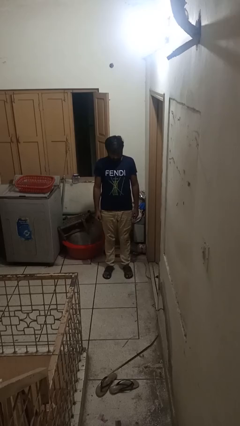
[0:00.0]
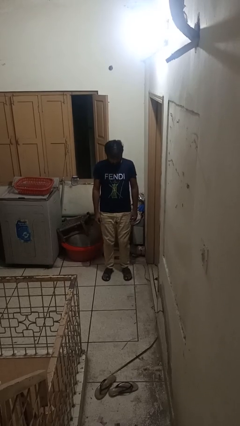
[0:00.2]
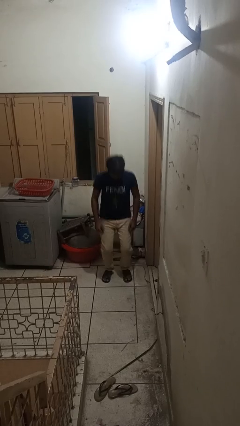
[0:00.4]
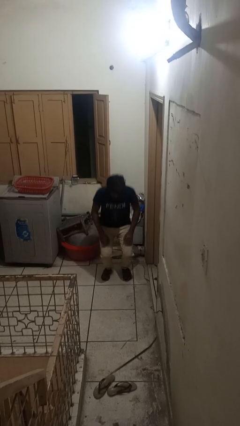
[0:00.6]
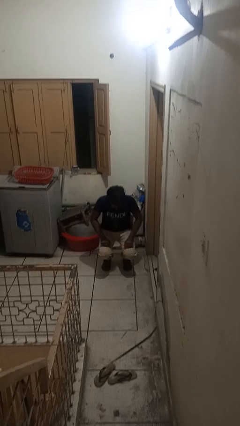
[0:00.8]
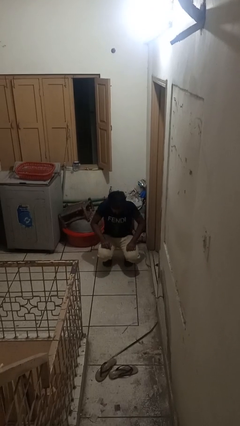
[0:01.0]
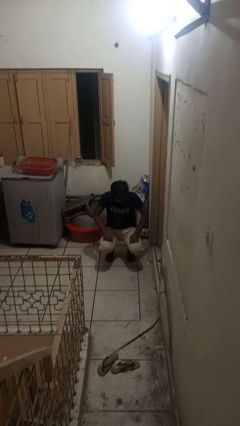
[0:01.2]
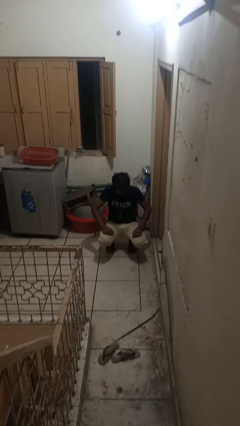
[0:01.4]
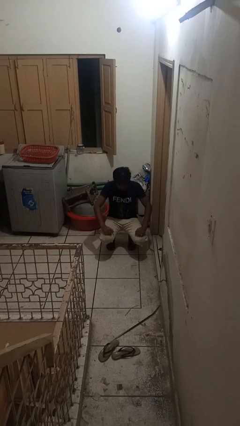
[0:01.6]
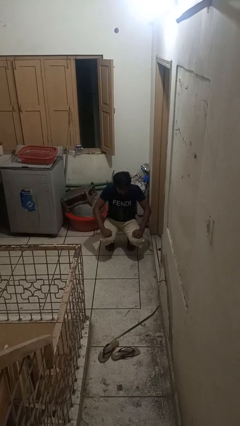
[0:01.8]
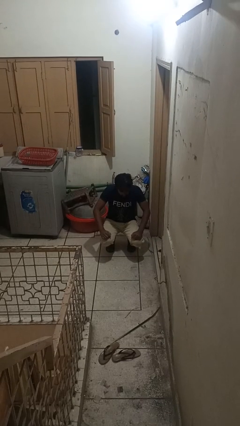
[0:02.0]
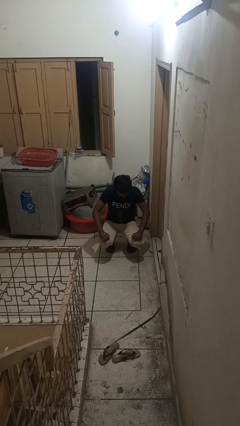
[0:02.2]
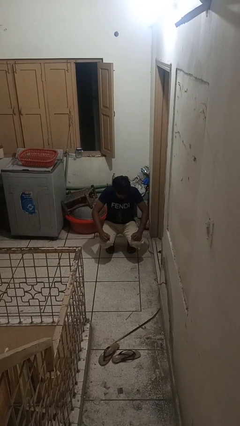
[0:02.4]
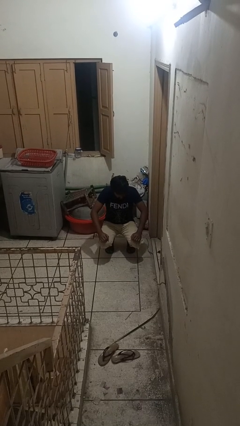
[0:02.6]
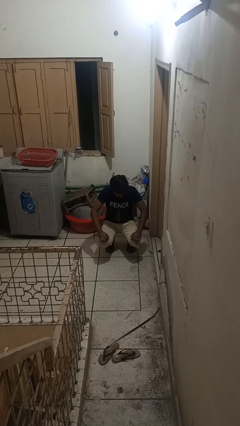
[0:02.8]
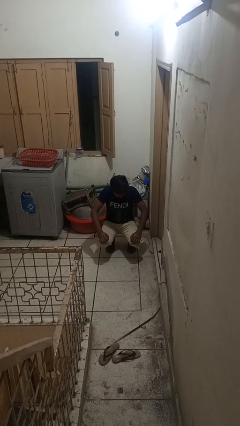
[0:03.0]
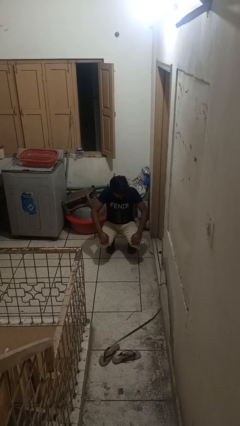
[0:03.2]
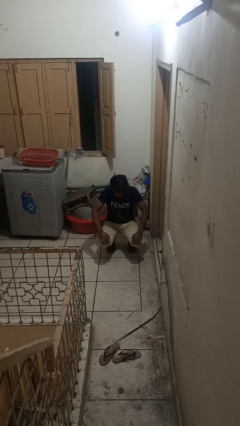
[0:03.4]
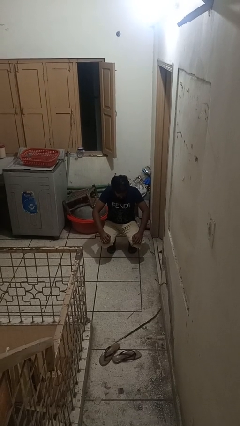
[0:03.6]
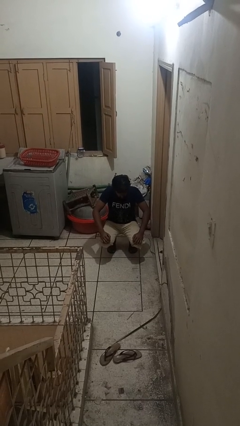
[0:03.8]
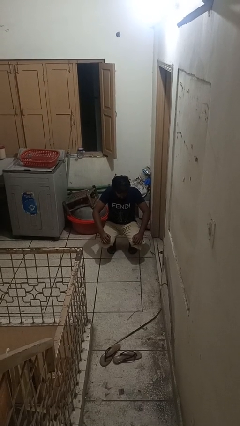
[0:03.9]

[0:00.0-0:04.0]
person squats

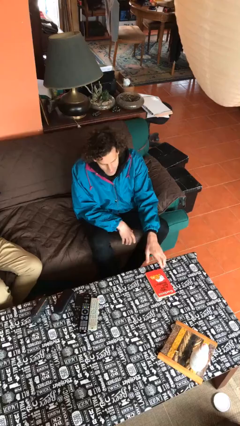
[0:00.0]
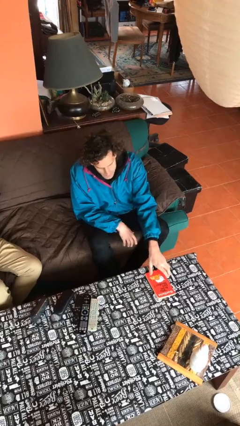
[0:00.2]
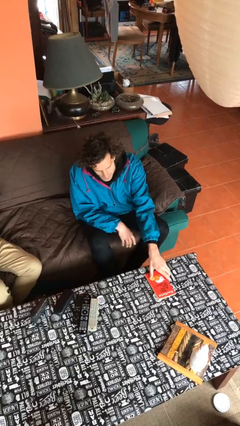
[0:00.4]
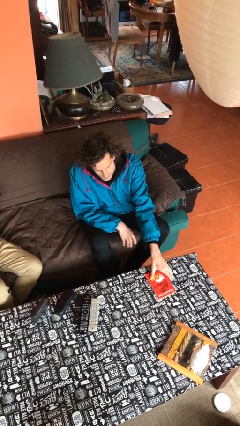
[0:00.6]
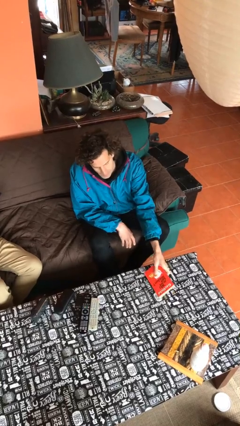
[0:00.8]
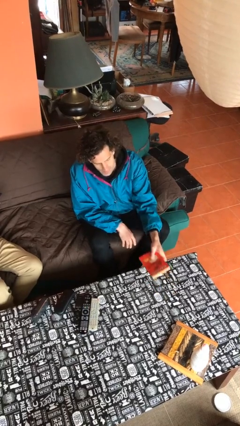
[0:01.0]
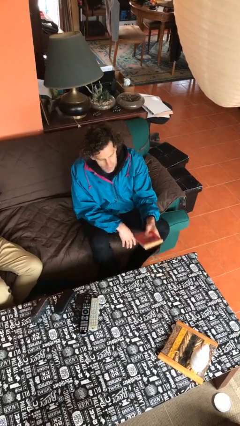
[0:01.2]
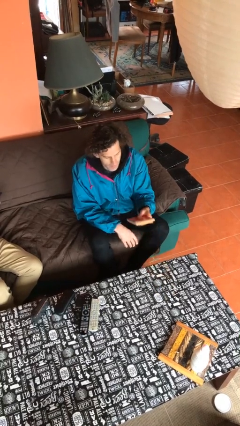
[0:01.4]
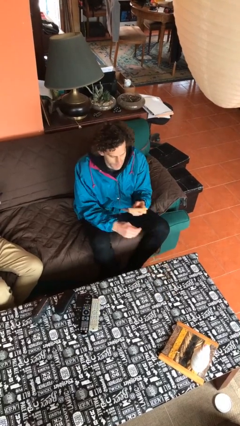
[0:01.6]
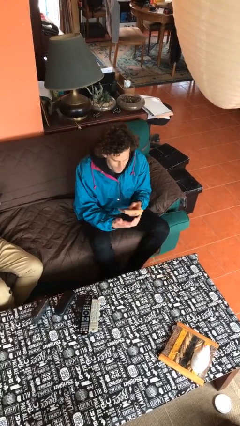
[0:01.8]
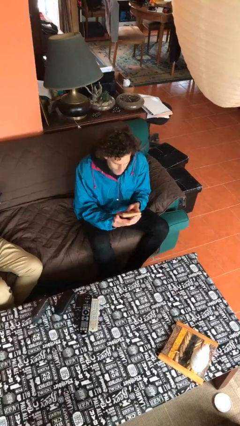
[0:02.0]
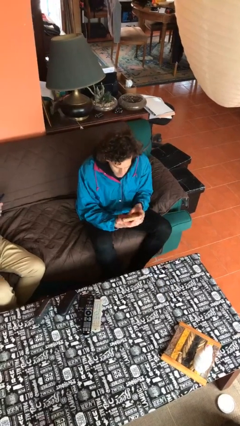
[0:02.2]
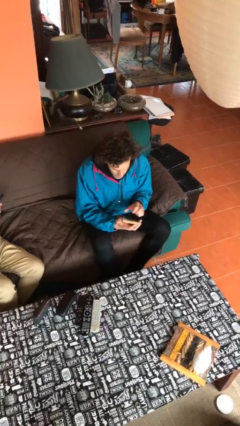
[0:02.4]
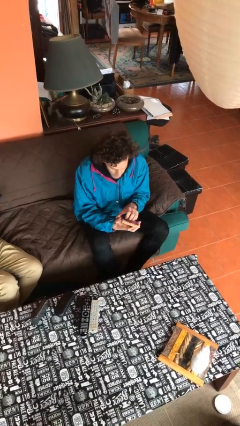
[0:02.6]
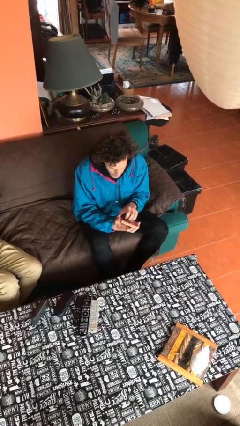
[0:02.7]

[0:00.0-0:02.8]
person picks up object from table

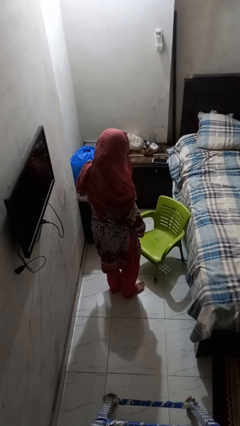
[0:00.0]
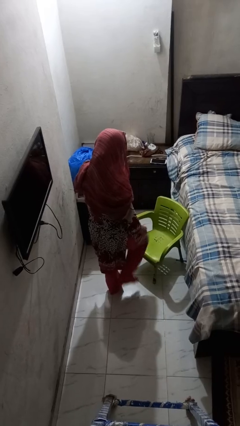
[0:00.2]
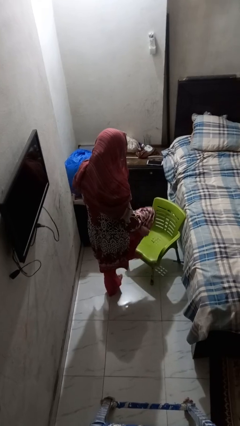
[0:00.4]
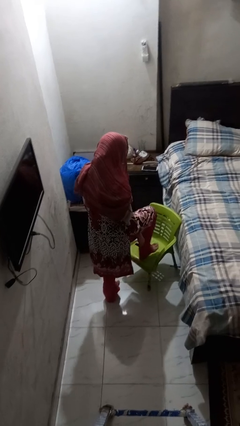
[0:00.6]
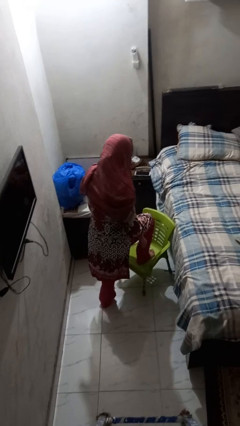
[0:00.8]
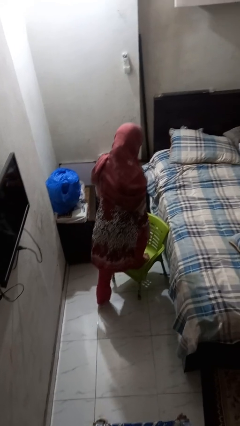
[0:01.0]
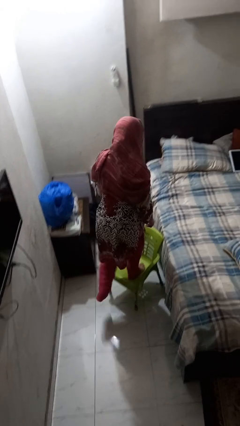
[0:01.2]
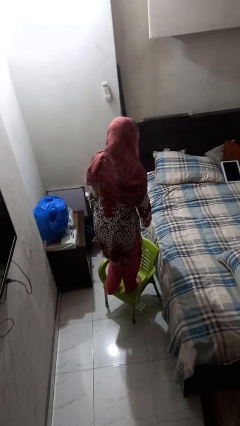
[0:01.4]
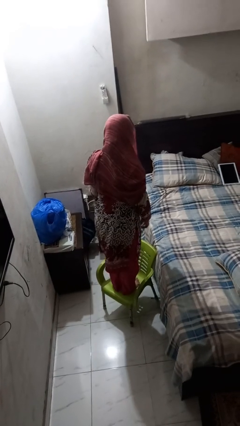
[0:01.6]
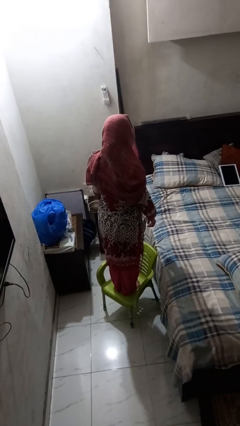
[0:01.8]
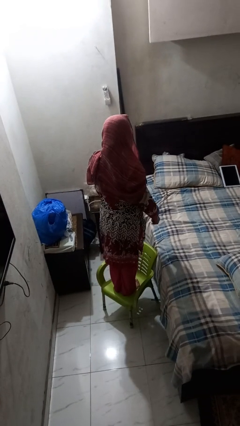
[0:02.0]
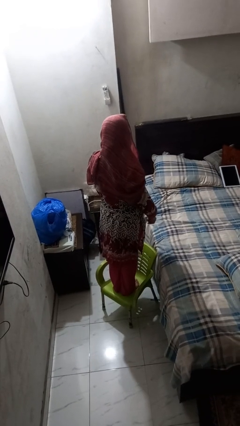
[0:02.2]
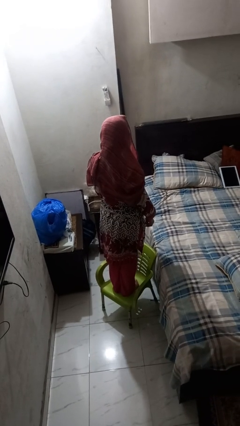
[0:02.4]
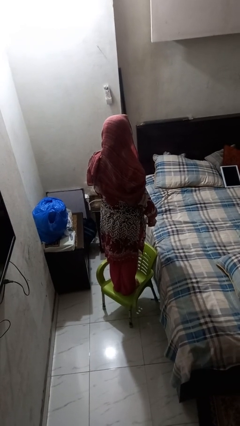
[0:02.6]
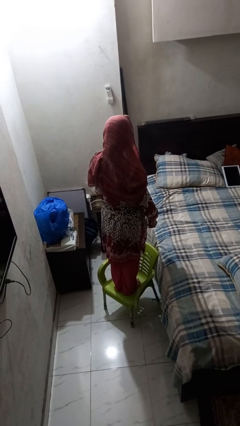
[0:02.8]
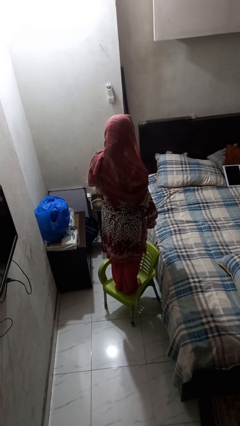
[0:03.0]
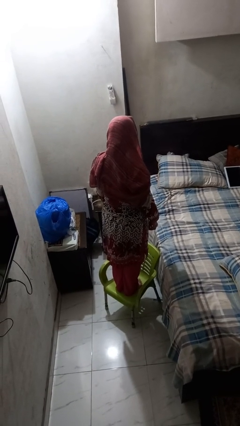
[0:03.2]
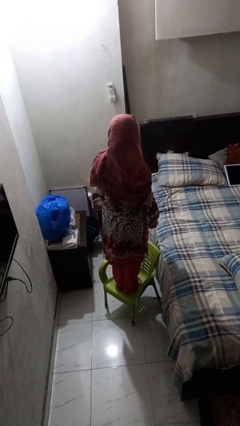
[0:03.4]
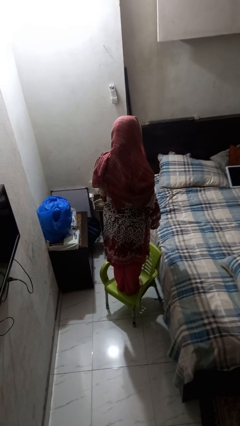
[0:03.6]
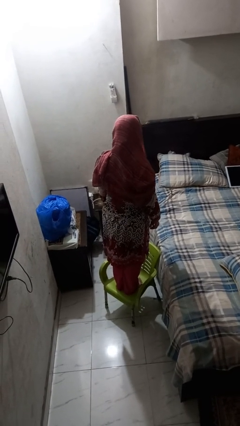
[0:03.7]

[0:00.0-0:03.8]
person climbs on chair

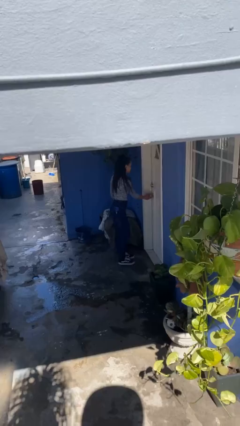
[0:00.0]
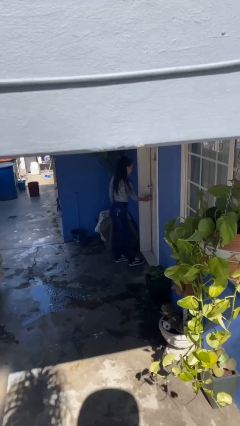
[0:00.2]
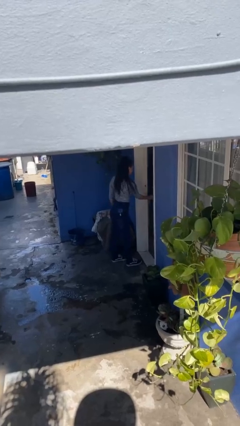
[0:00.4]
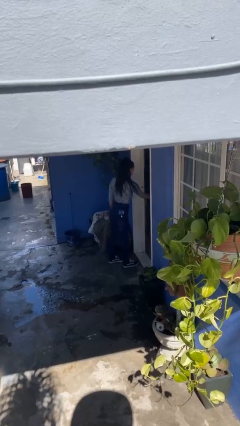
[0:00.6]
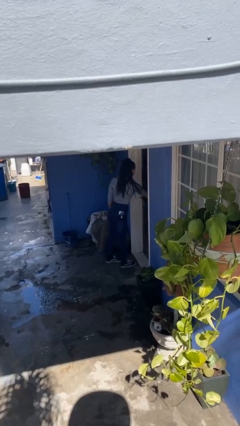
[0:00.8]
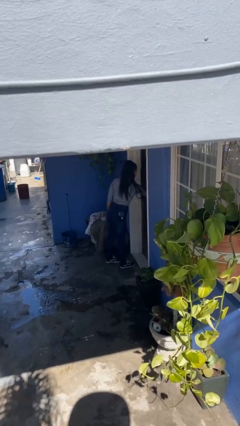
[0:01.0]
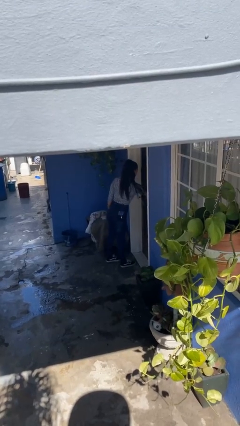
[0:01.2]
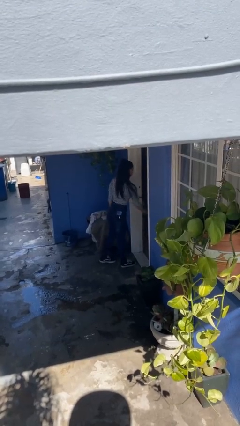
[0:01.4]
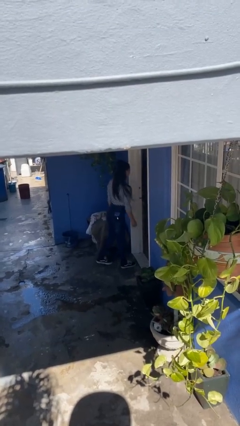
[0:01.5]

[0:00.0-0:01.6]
person opens facility door

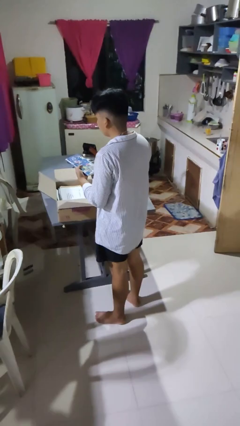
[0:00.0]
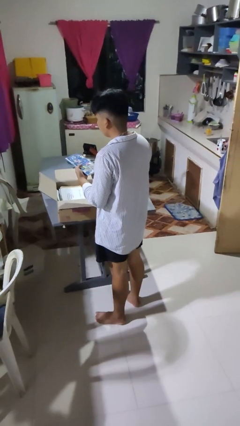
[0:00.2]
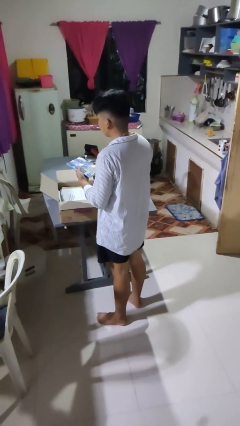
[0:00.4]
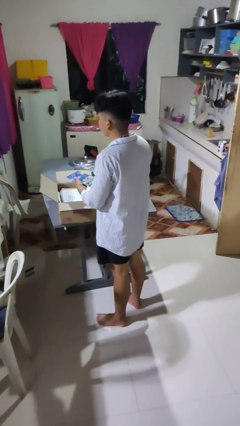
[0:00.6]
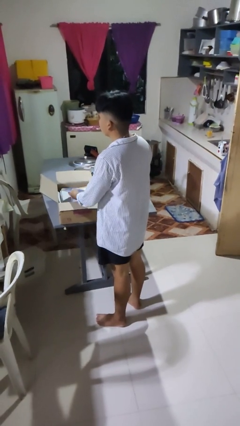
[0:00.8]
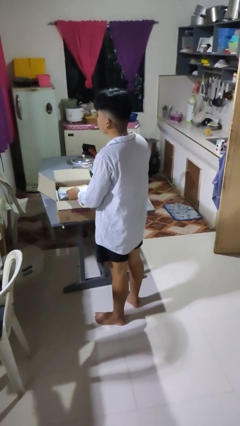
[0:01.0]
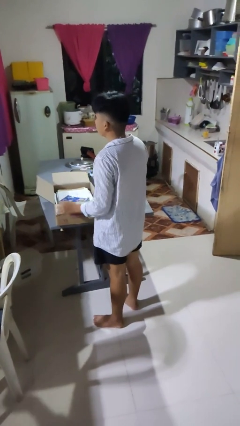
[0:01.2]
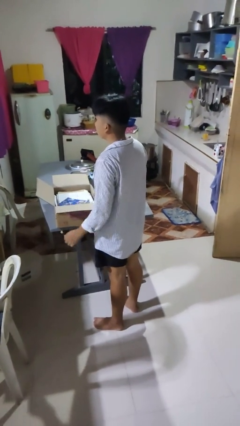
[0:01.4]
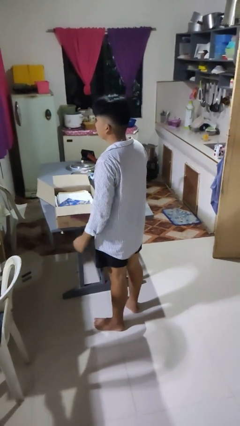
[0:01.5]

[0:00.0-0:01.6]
person puts object into box

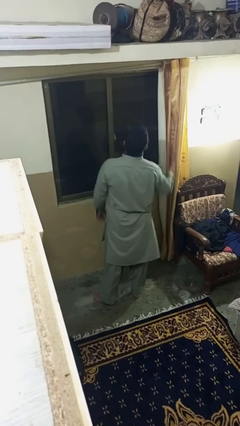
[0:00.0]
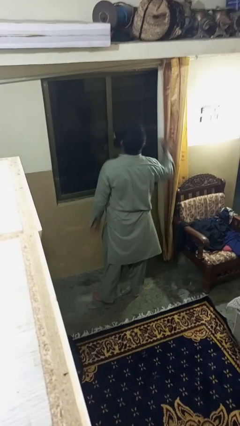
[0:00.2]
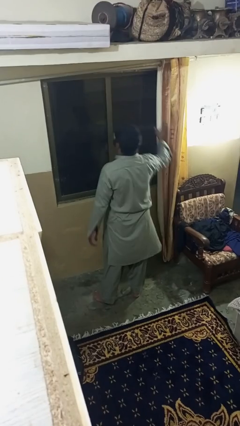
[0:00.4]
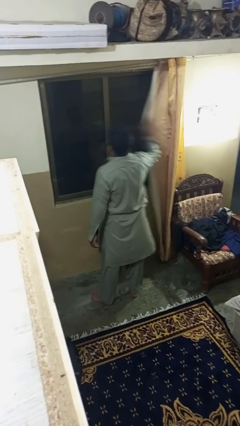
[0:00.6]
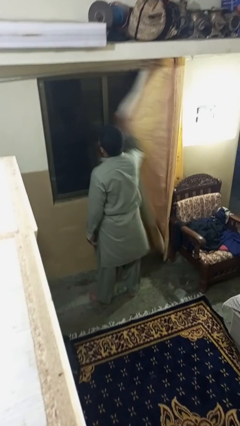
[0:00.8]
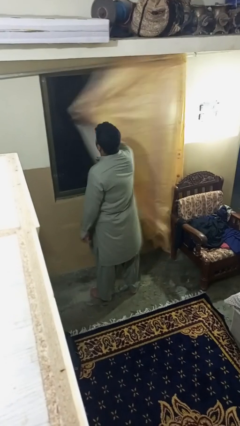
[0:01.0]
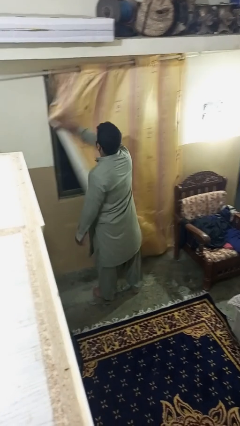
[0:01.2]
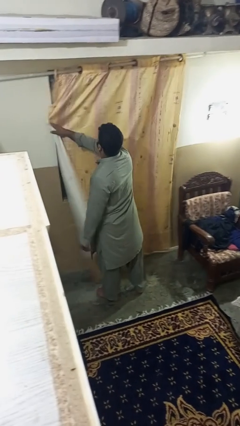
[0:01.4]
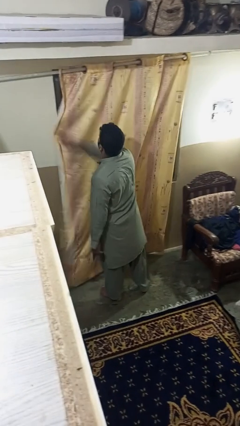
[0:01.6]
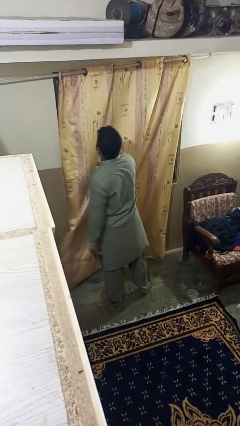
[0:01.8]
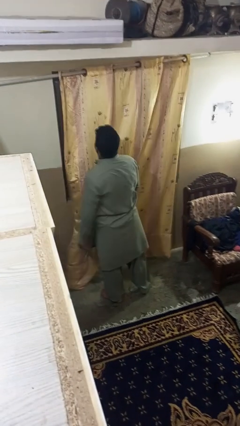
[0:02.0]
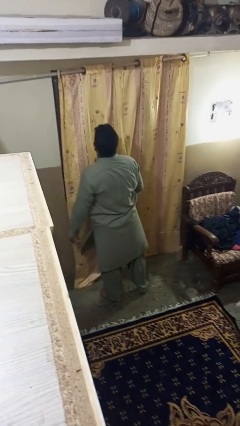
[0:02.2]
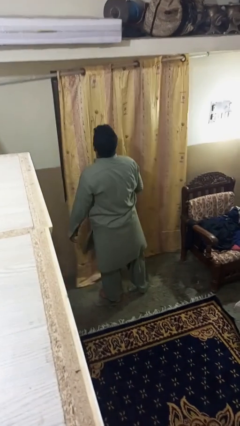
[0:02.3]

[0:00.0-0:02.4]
person closes curtains

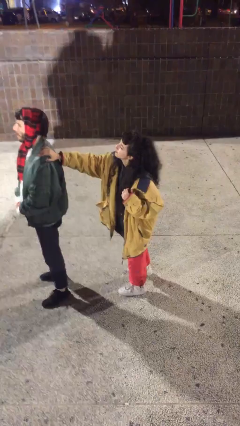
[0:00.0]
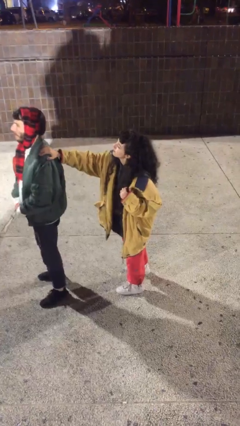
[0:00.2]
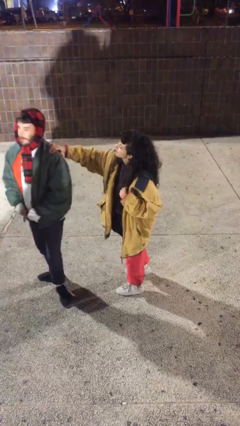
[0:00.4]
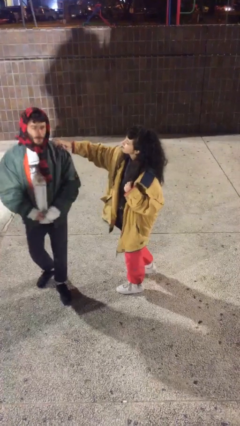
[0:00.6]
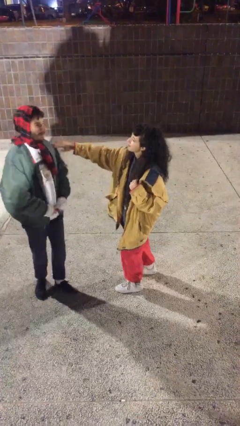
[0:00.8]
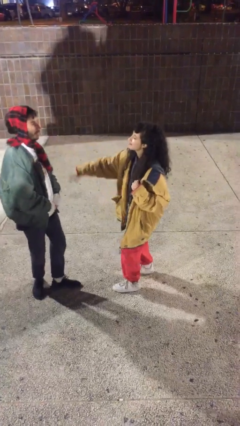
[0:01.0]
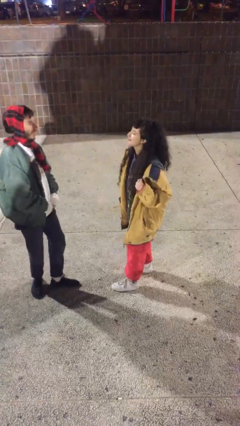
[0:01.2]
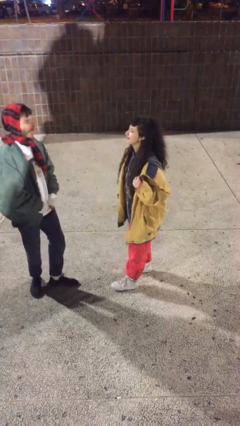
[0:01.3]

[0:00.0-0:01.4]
person spins person around
